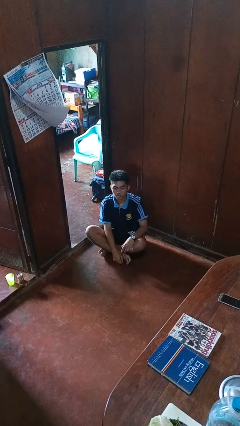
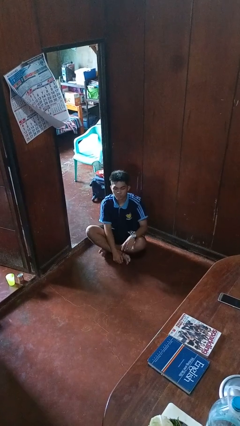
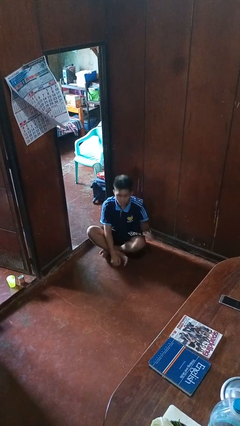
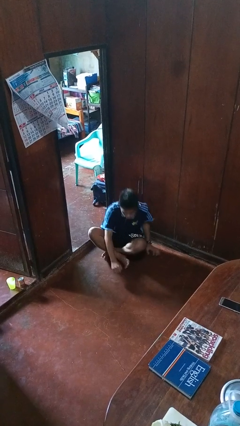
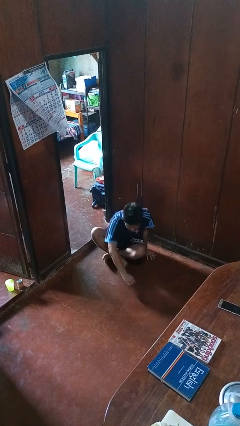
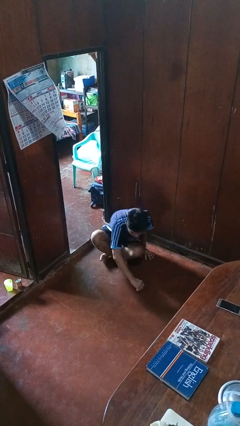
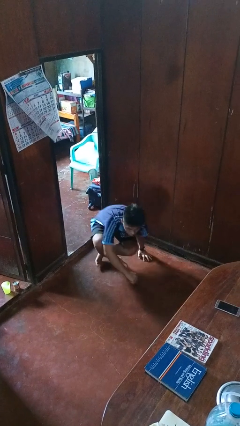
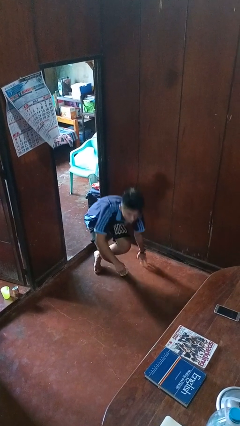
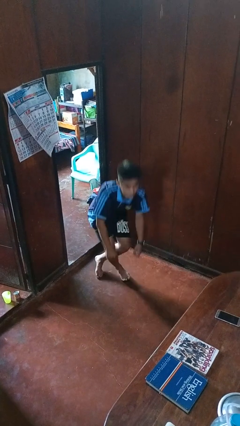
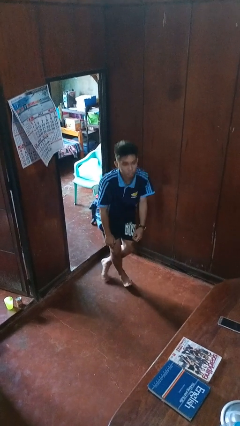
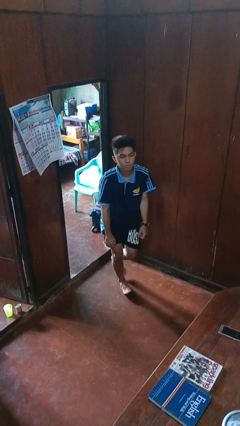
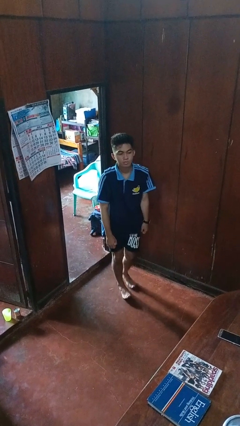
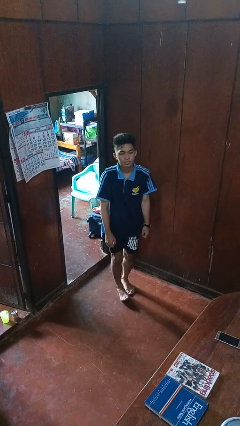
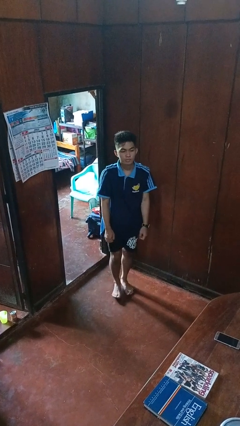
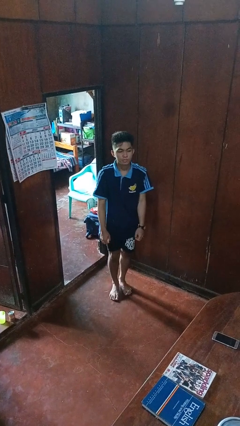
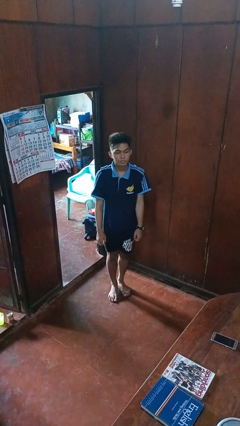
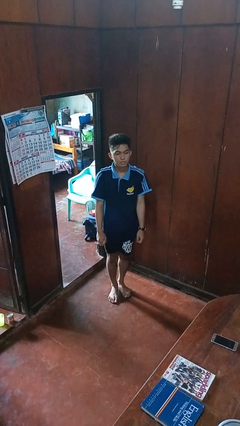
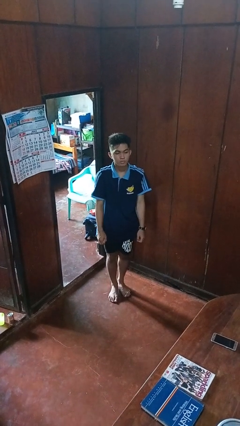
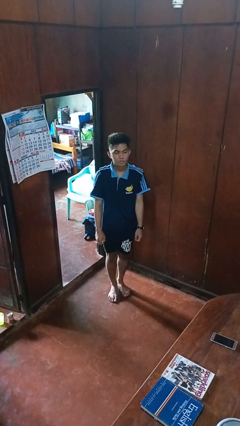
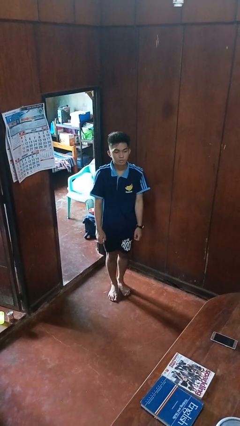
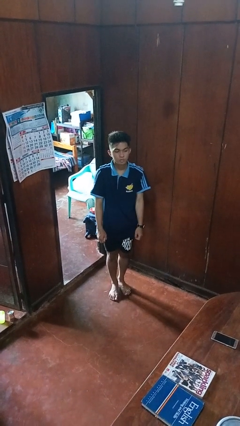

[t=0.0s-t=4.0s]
person stands up from floor

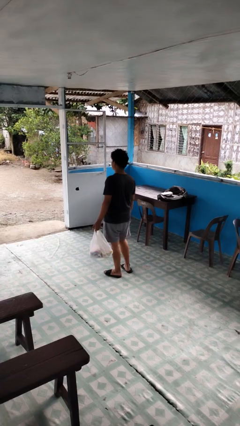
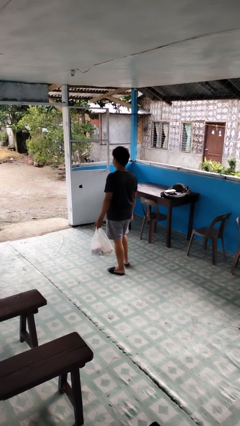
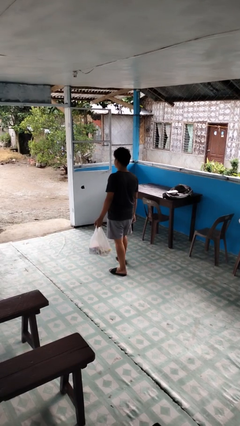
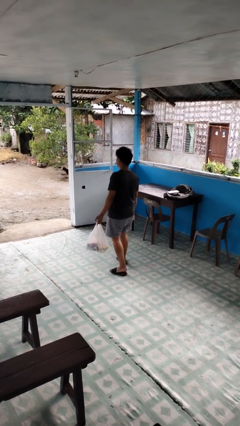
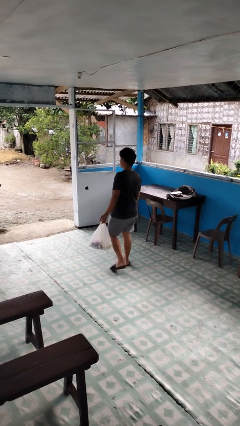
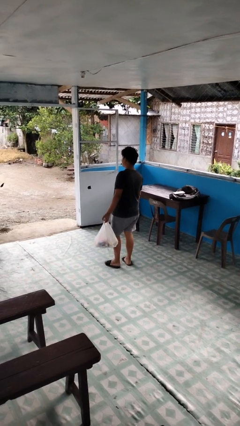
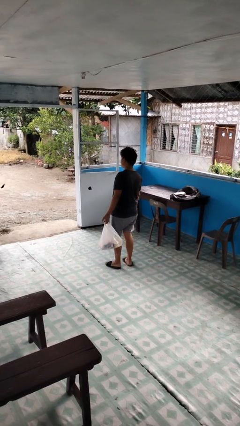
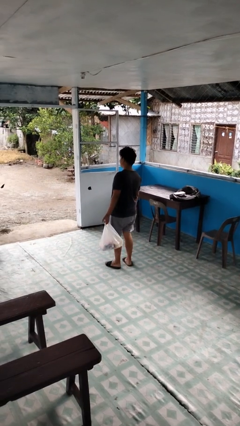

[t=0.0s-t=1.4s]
person carries groceries

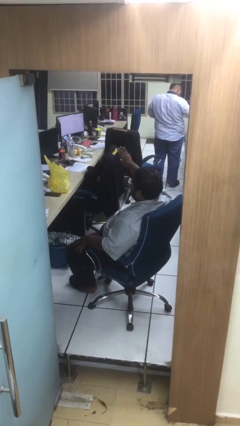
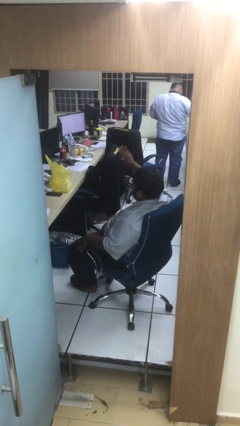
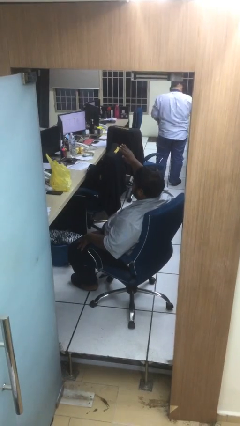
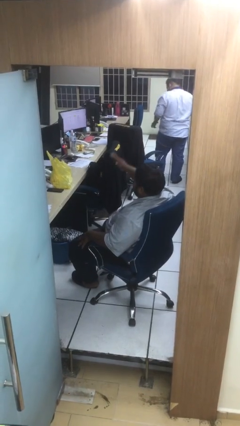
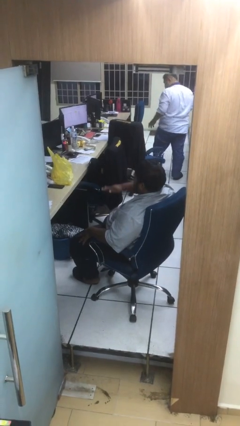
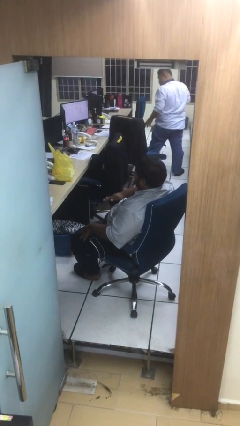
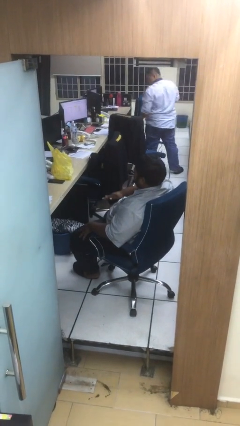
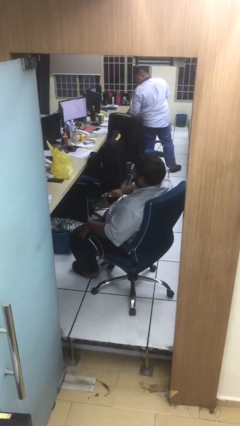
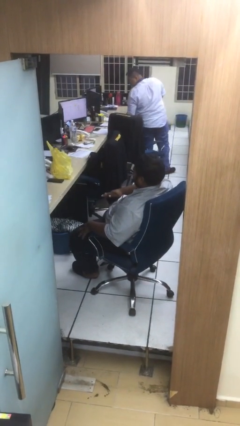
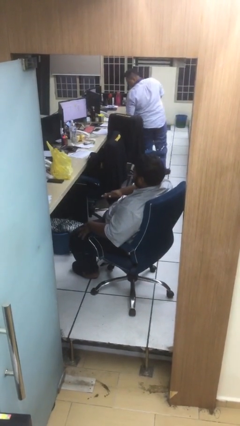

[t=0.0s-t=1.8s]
person gestures swipe down

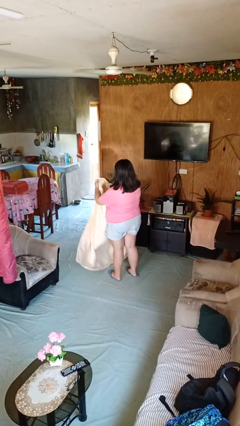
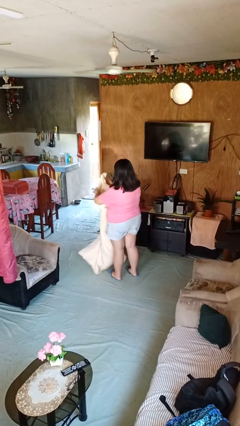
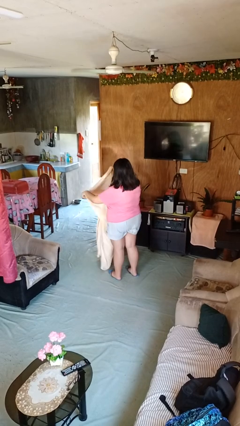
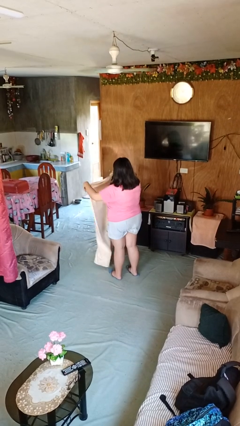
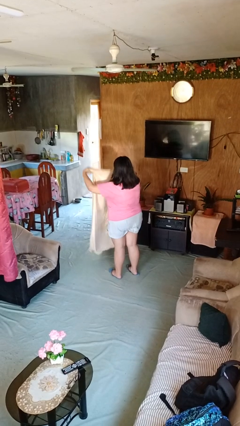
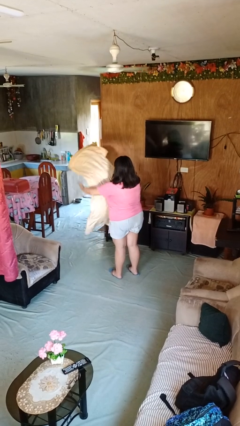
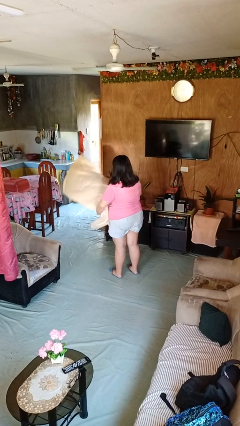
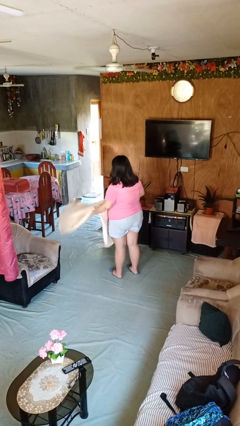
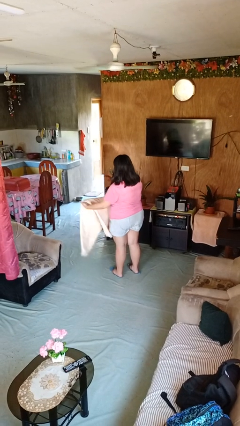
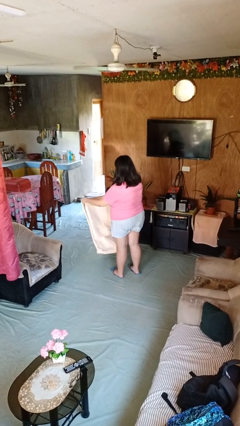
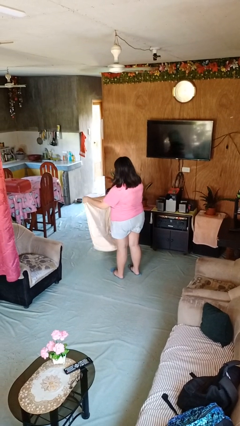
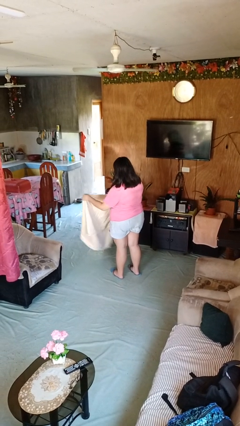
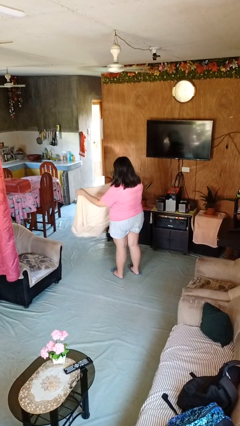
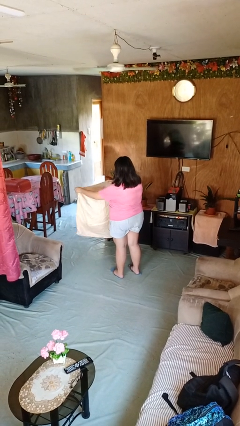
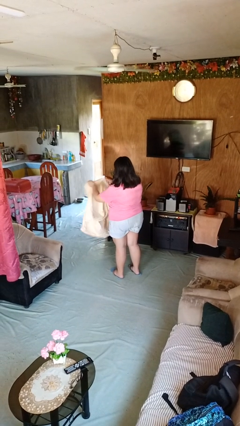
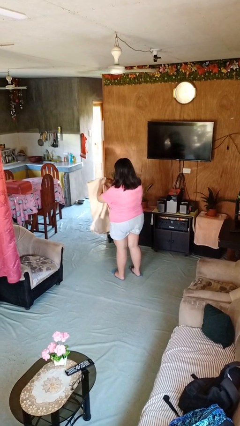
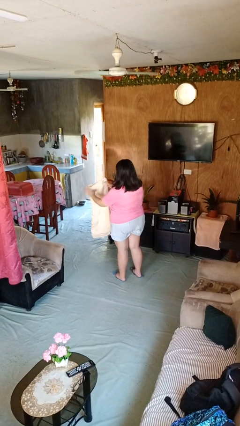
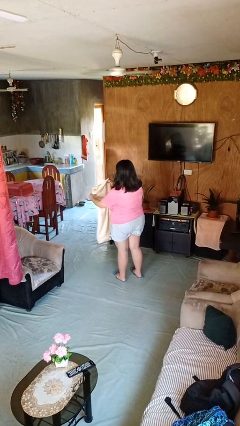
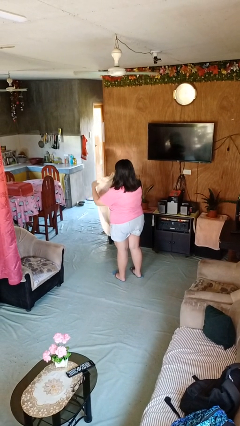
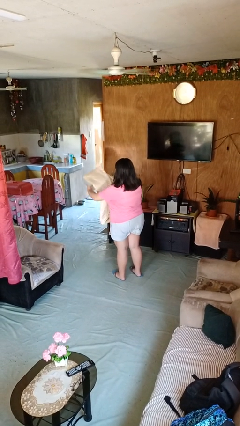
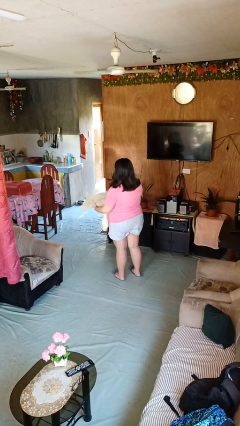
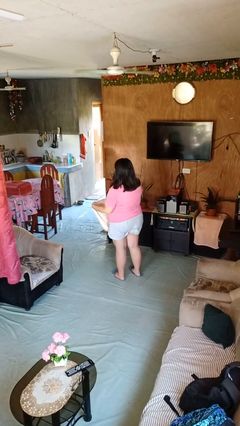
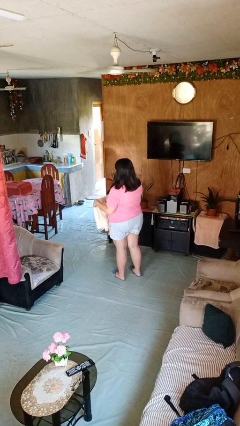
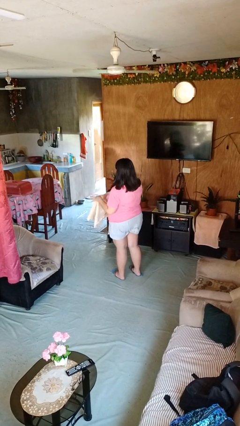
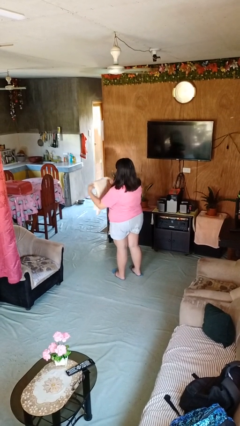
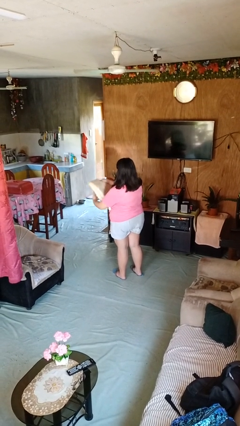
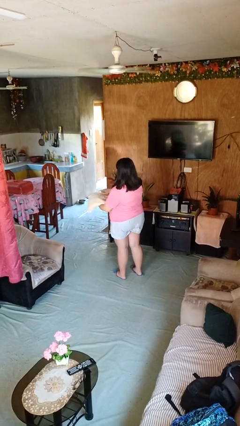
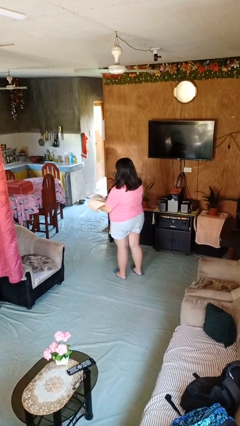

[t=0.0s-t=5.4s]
person folds blanket

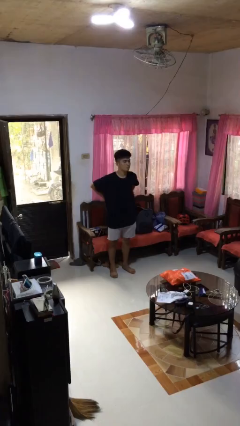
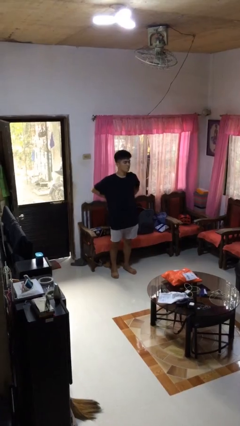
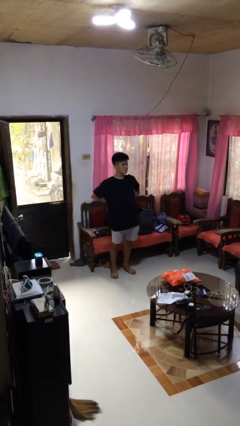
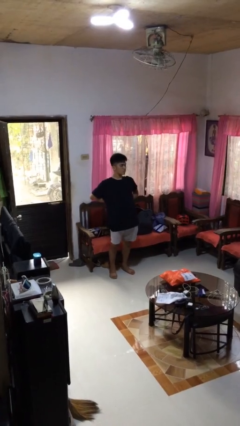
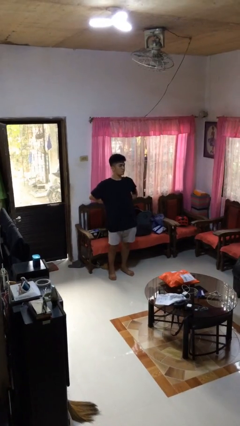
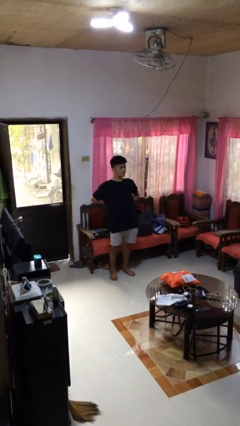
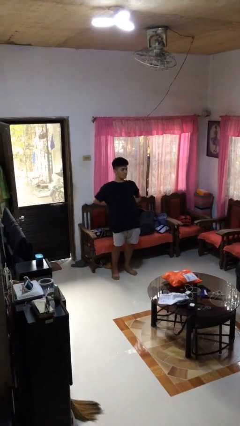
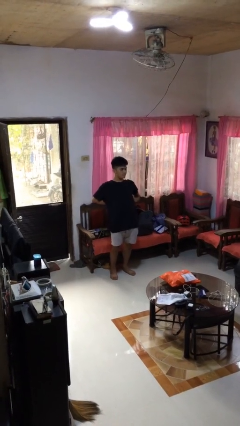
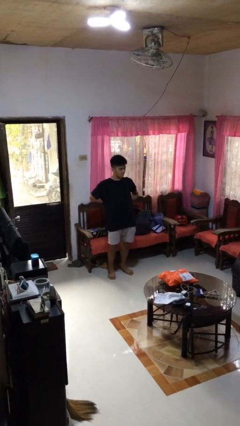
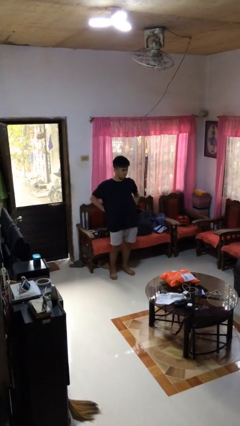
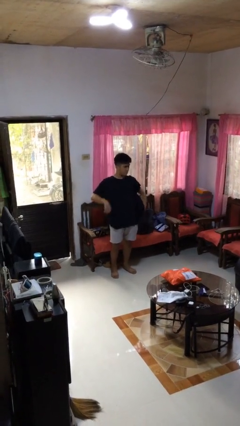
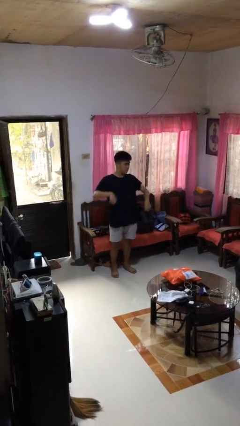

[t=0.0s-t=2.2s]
person stretches back

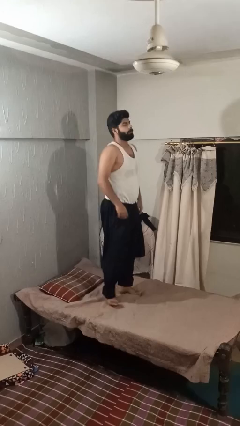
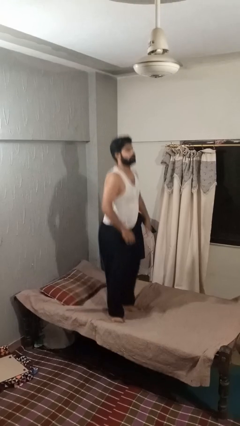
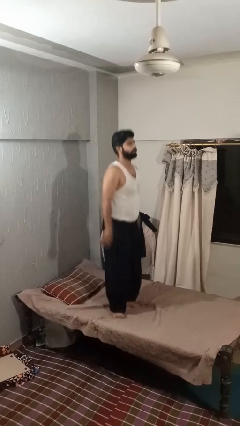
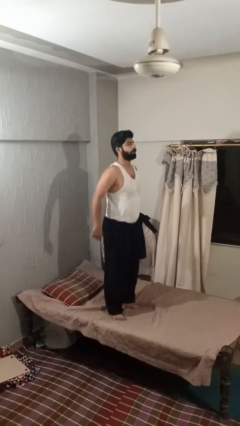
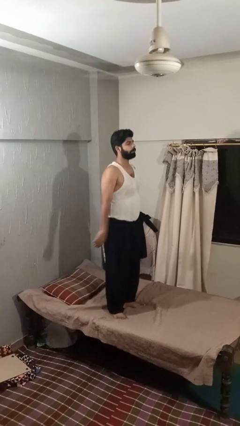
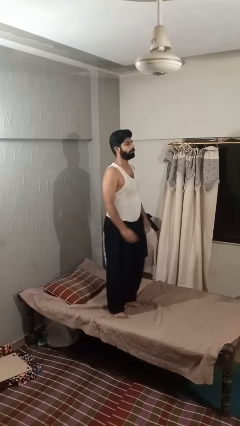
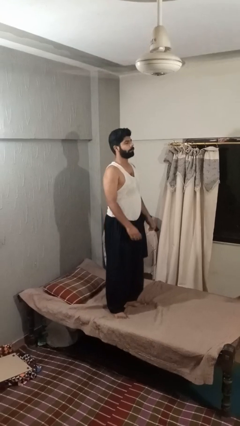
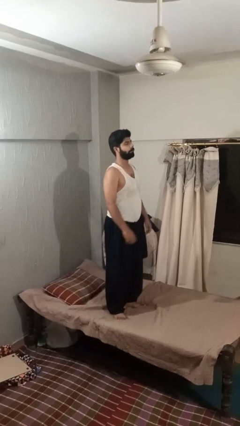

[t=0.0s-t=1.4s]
person jumps on bed

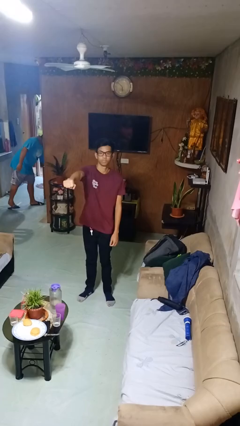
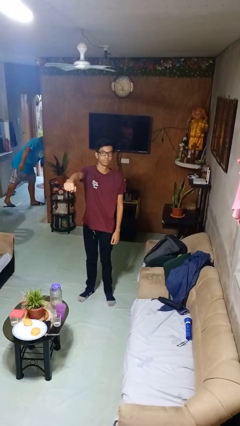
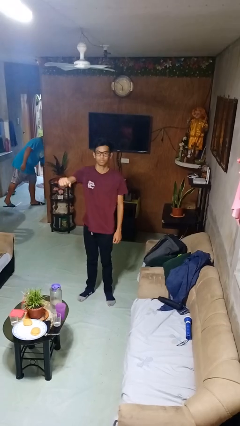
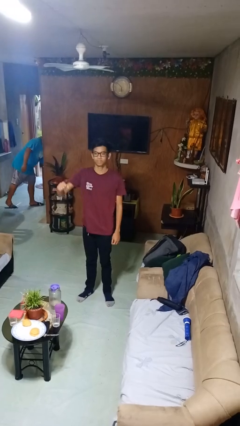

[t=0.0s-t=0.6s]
person punches

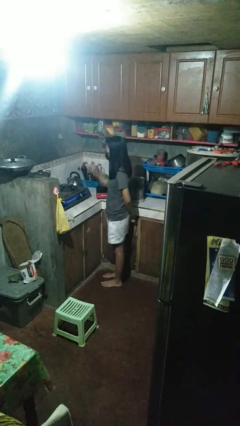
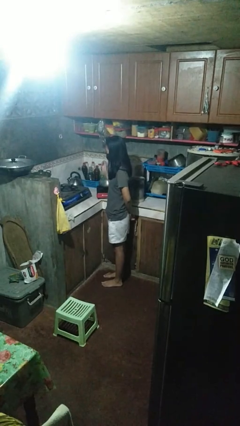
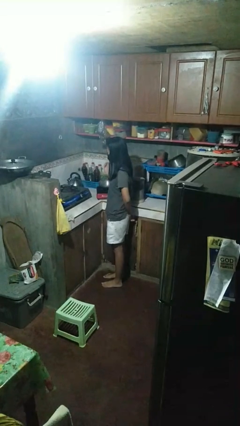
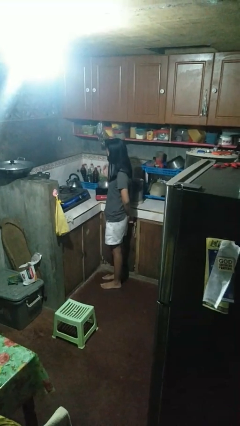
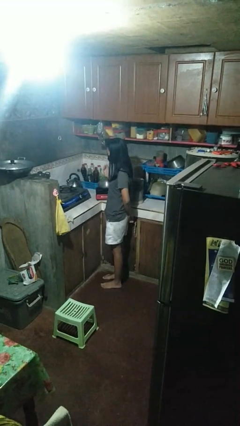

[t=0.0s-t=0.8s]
person burns hand
